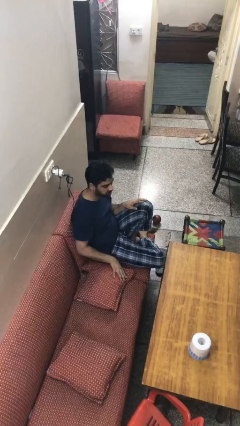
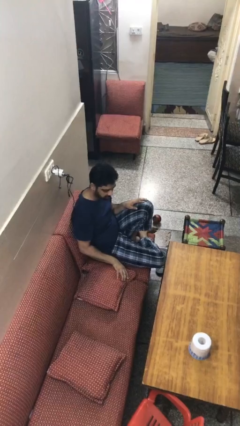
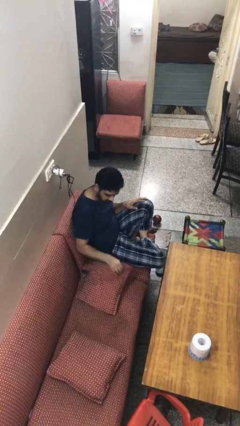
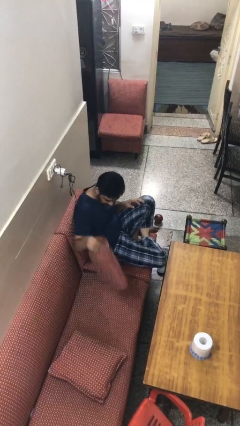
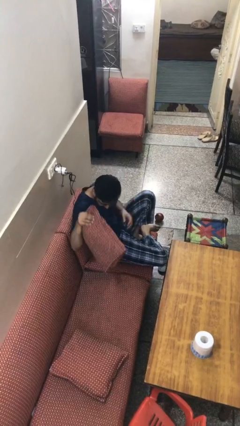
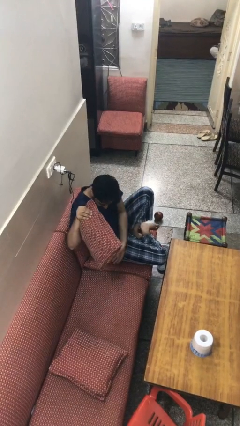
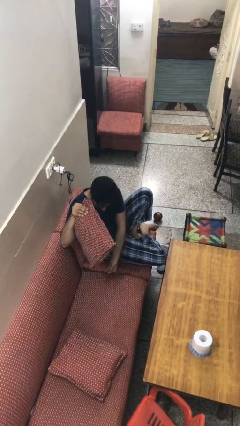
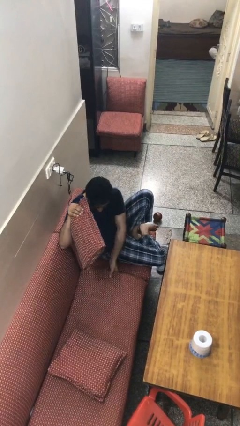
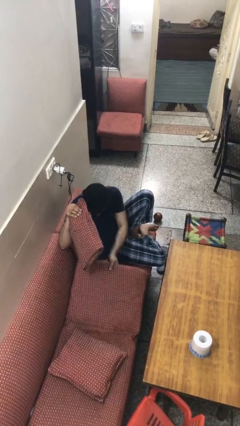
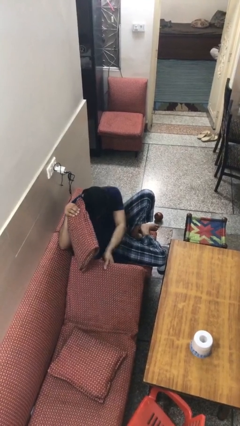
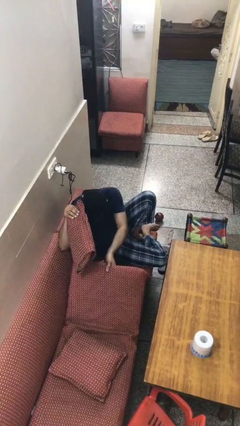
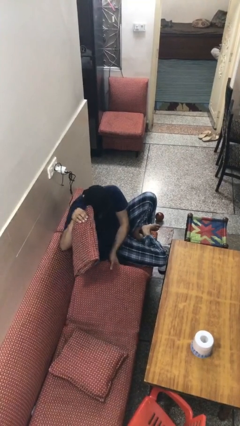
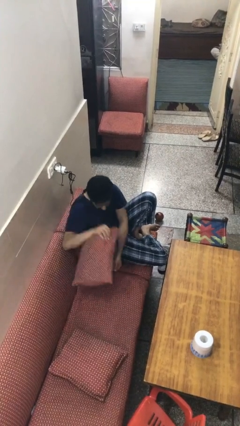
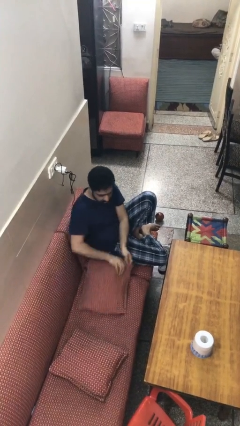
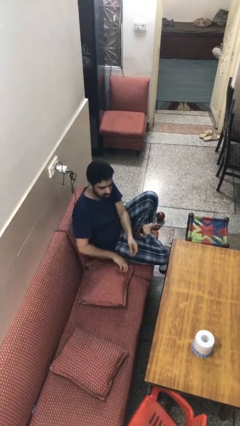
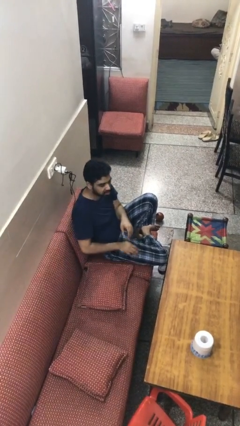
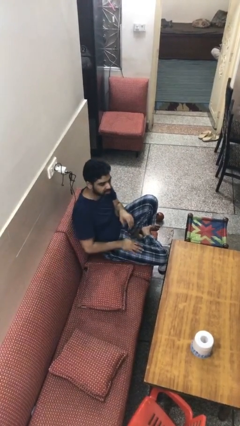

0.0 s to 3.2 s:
person searches under couch

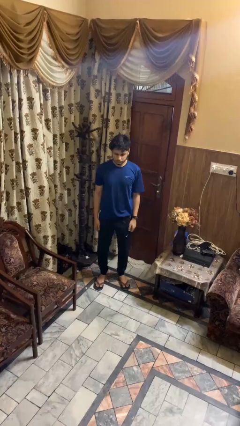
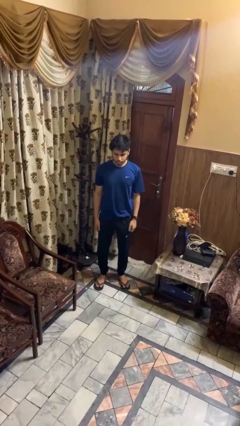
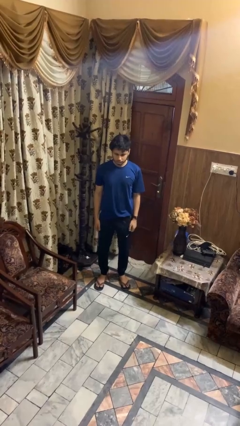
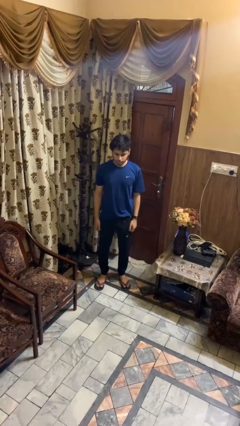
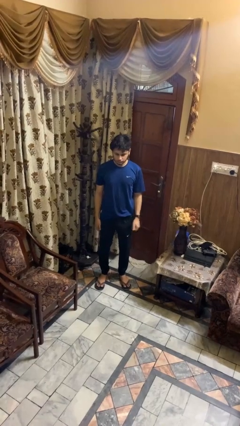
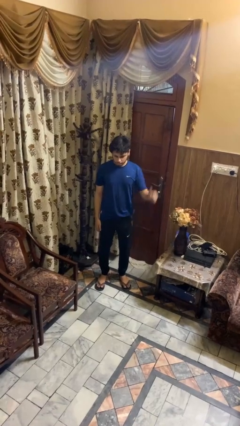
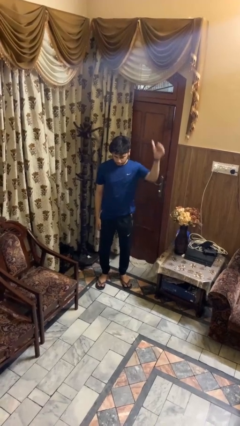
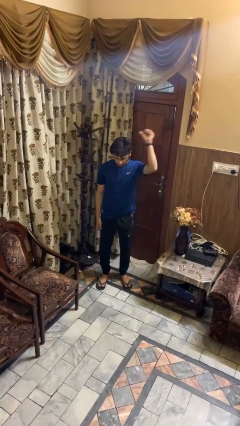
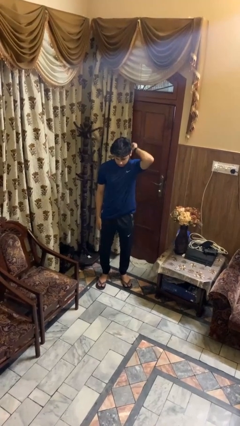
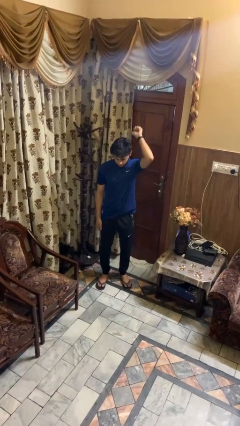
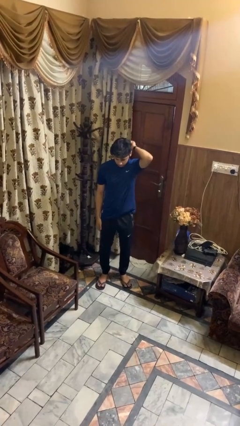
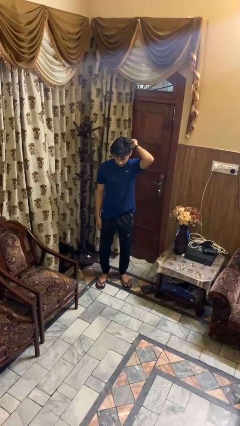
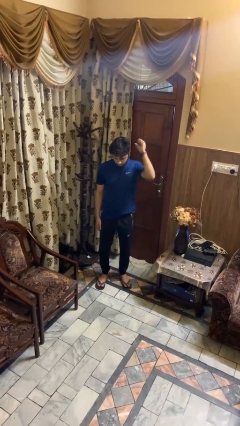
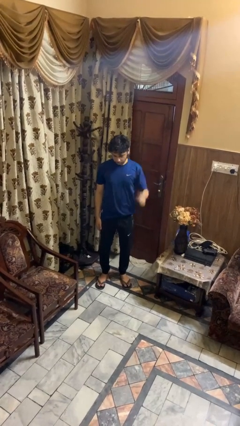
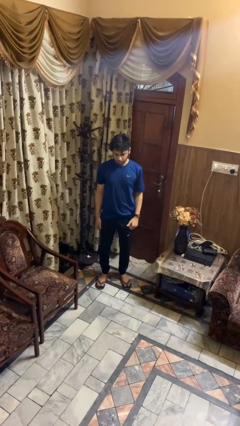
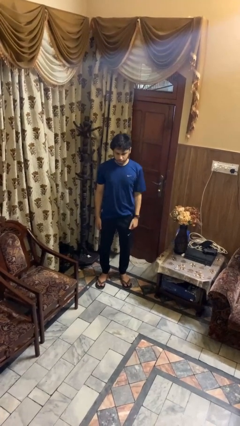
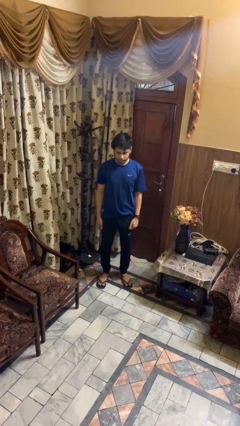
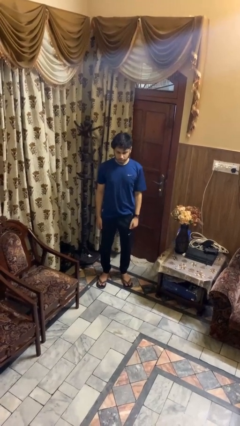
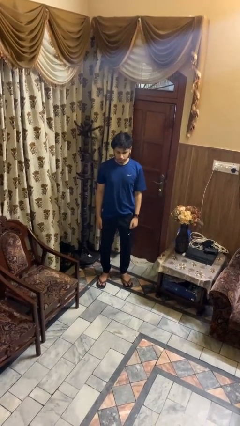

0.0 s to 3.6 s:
person gestures behind me

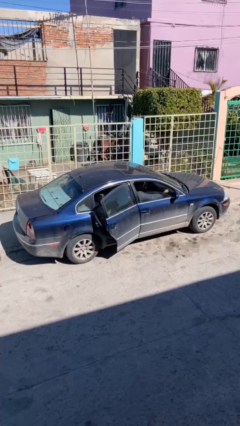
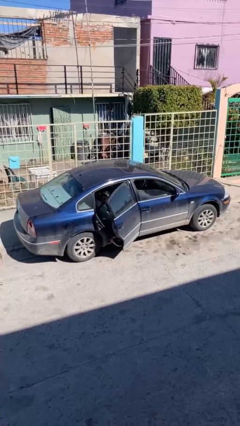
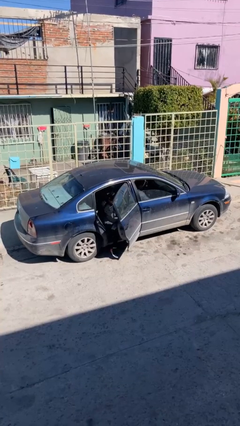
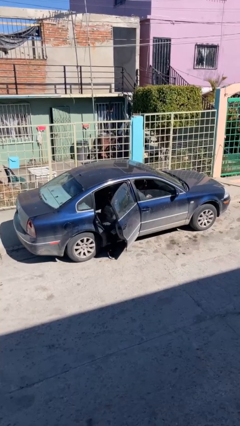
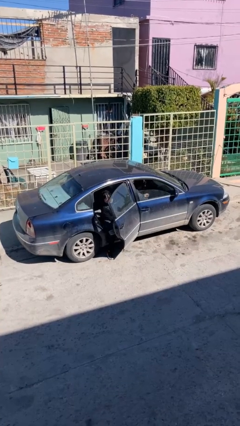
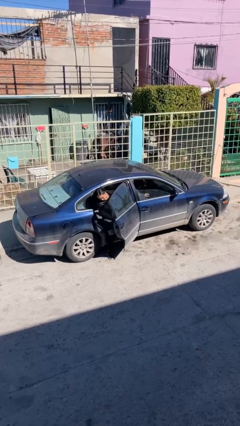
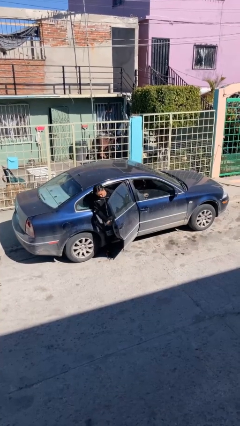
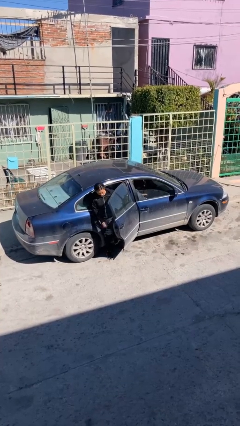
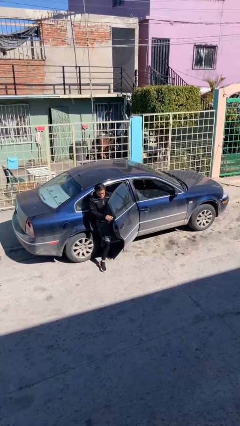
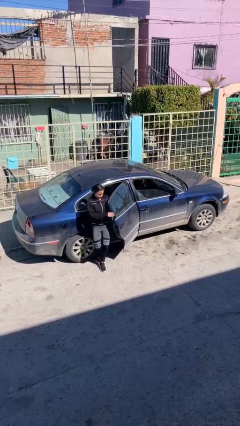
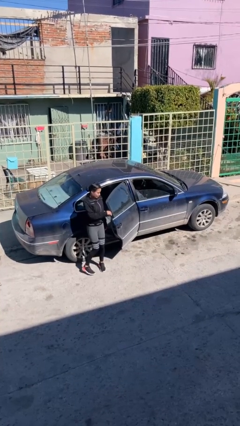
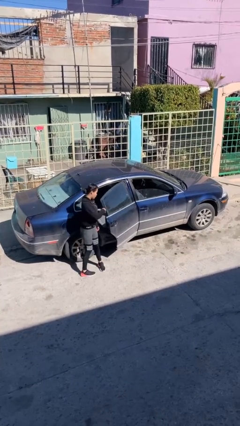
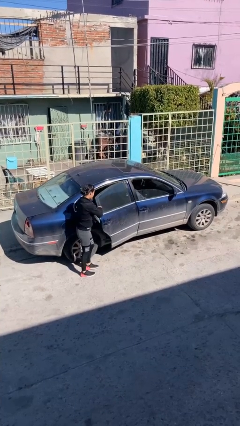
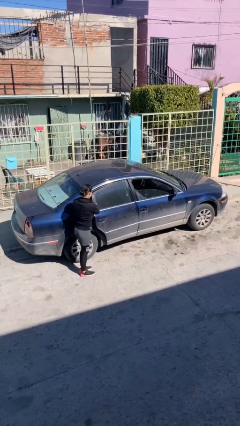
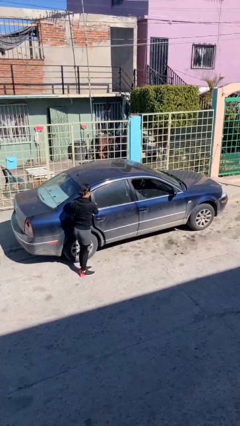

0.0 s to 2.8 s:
car drops off person

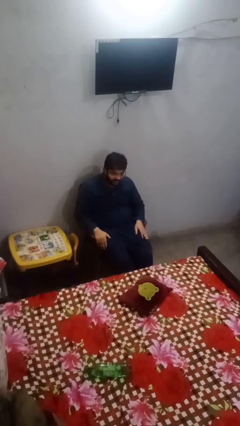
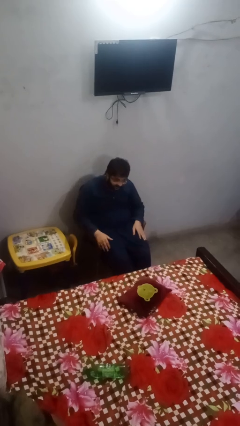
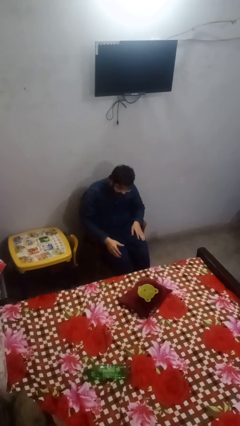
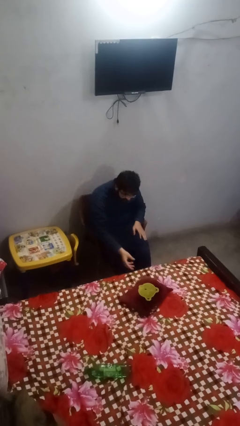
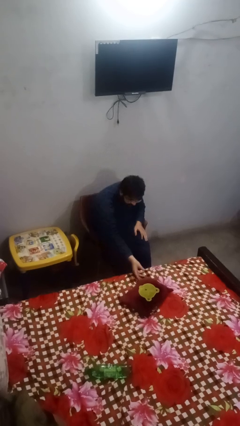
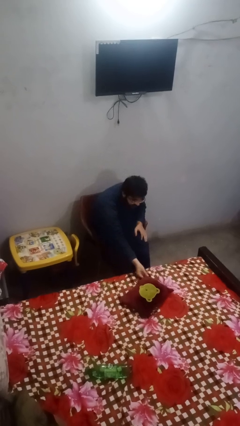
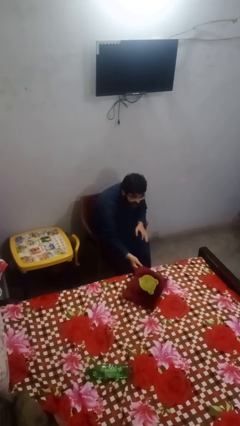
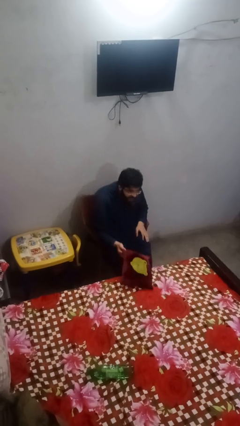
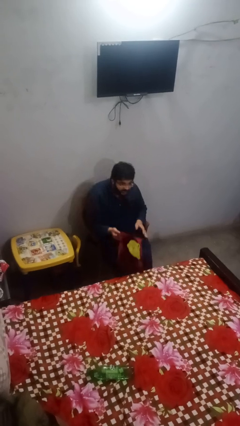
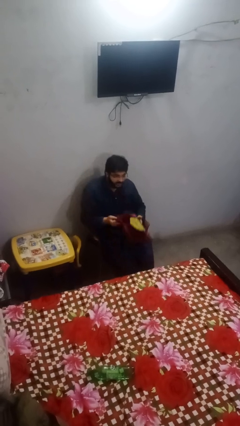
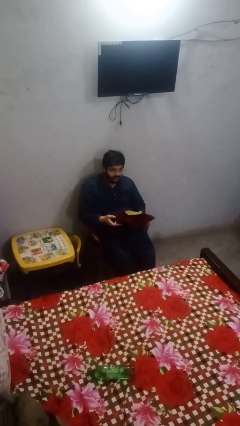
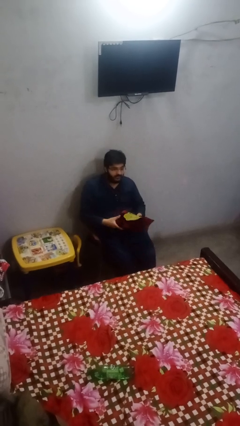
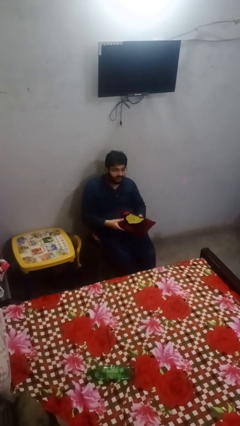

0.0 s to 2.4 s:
person picks up object from bed

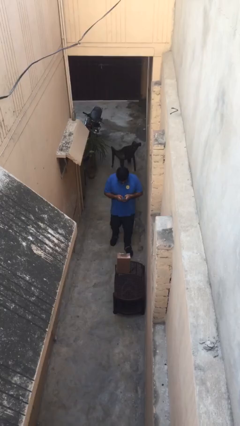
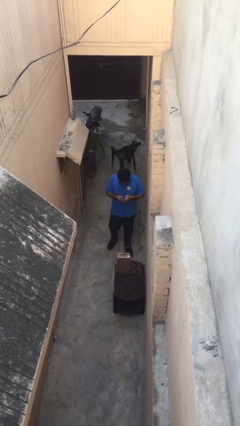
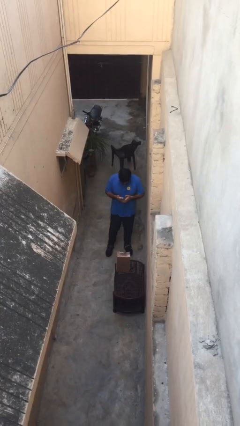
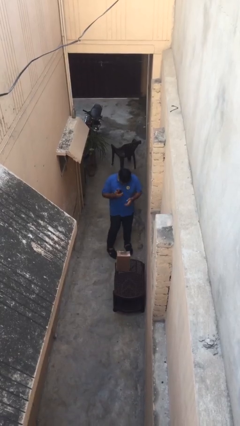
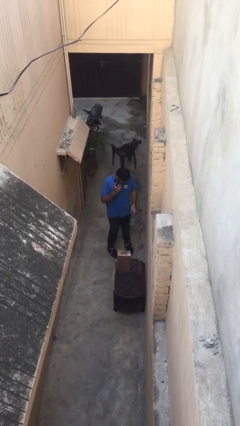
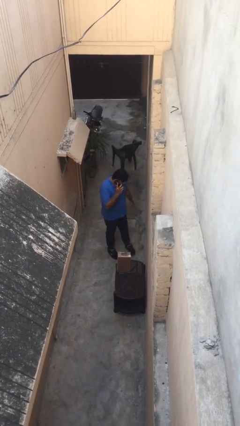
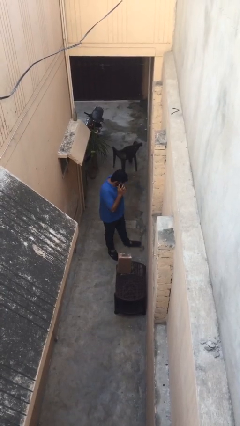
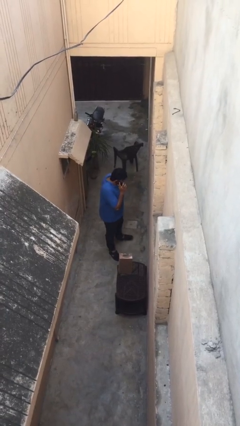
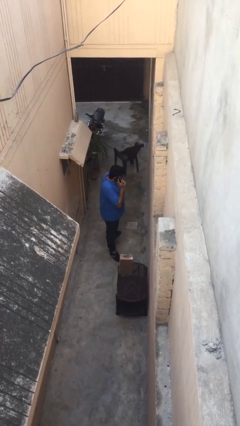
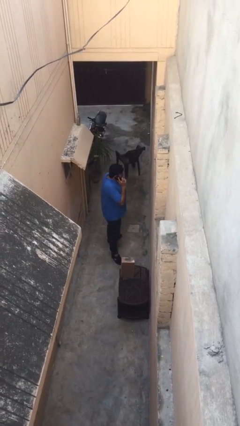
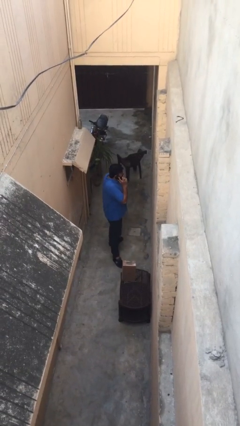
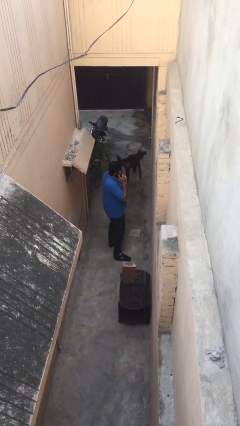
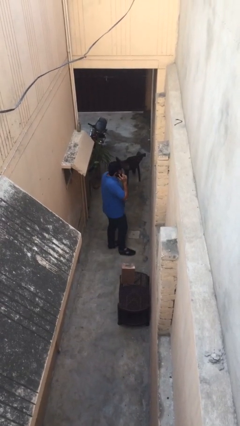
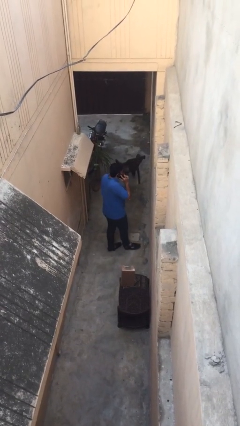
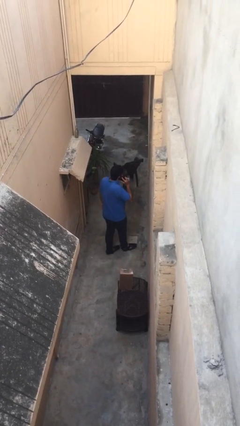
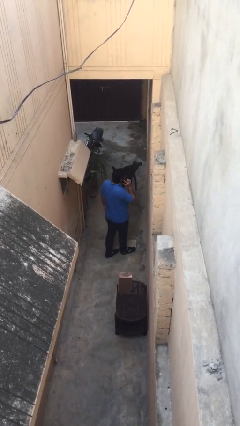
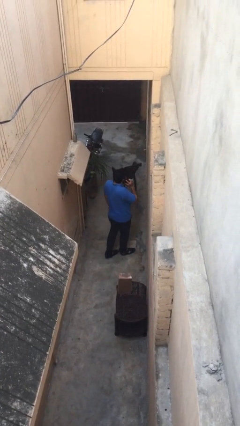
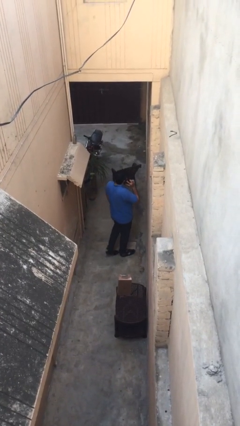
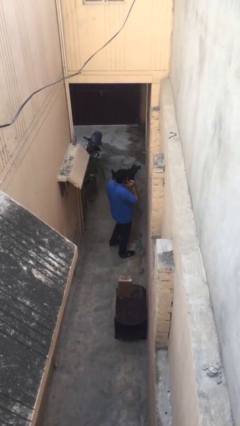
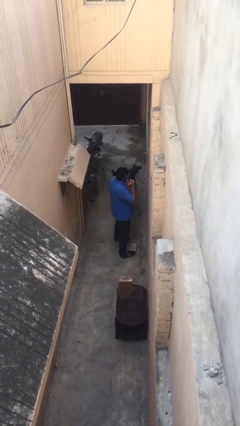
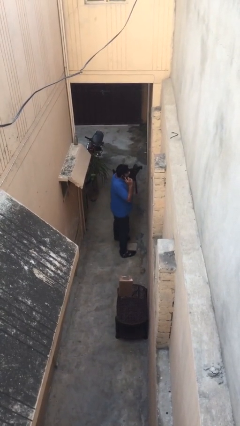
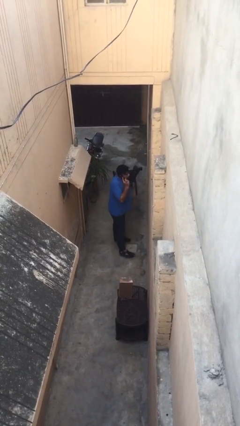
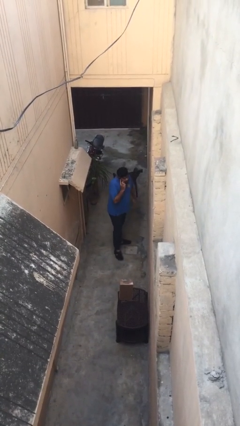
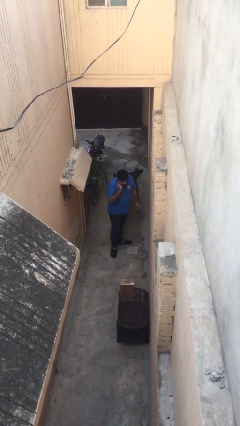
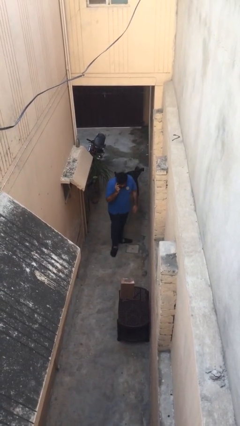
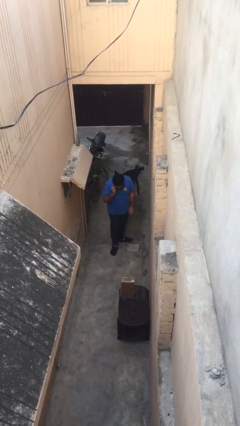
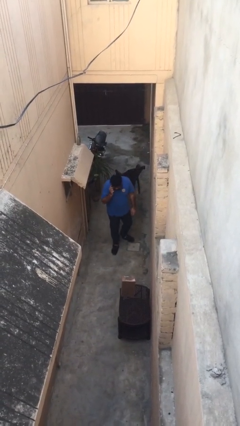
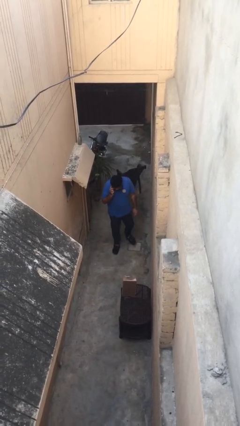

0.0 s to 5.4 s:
person talks on phone

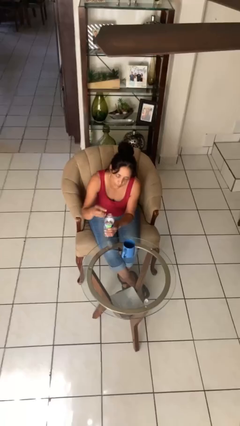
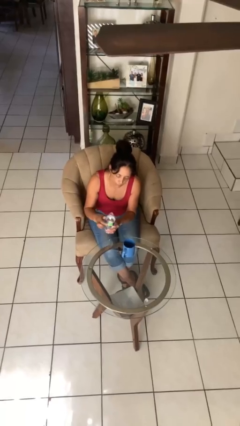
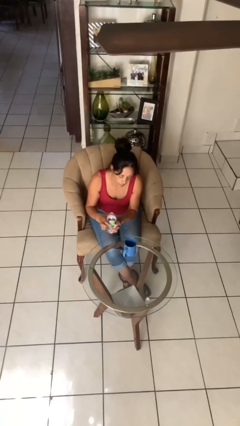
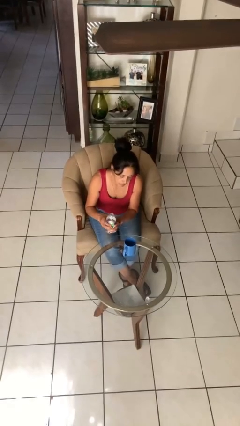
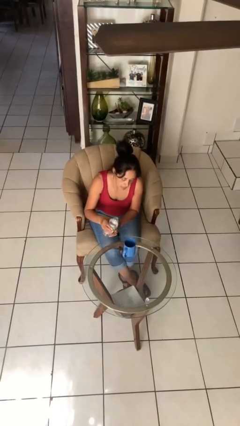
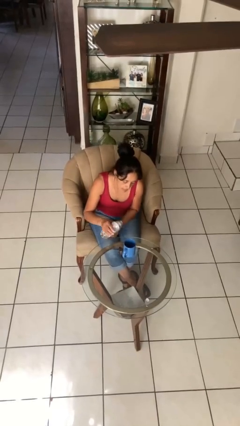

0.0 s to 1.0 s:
person unscrews lid from bottle
